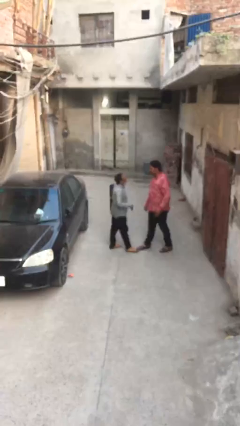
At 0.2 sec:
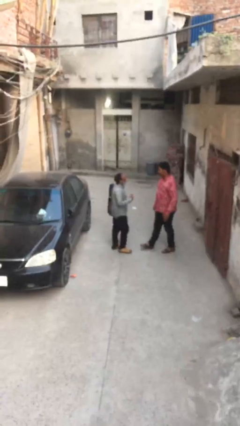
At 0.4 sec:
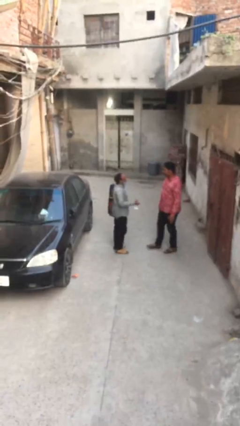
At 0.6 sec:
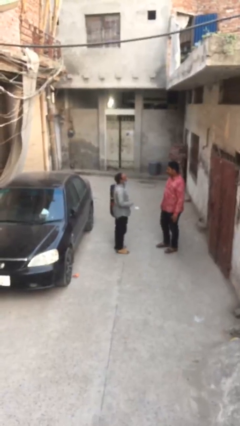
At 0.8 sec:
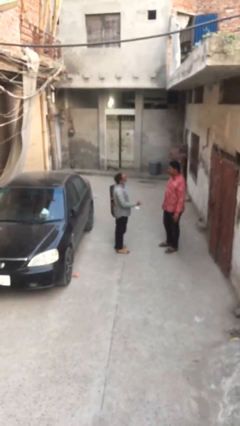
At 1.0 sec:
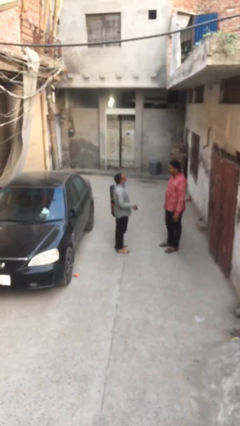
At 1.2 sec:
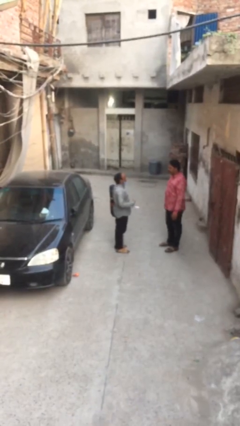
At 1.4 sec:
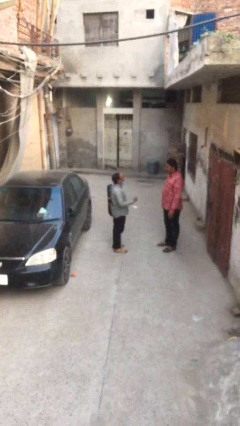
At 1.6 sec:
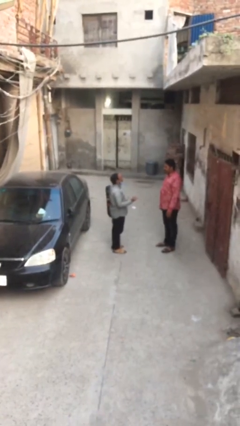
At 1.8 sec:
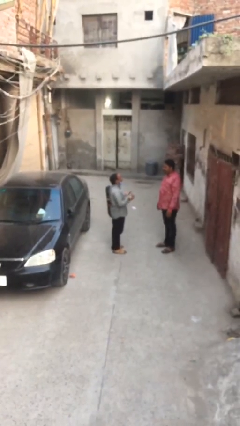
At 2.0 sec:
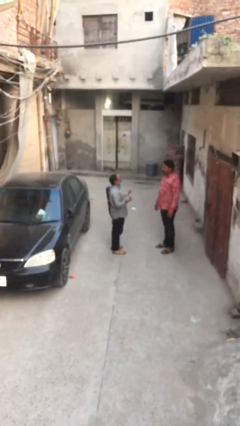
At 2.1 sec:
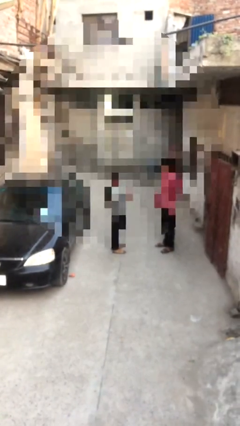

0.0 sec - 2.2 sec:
person talks to person

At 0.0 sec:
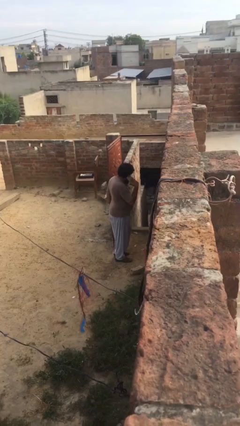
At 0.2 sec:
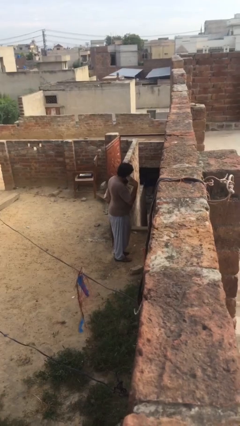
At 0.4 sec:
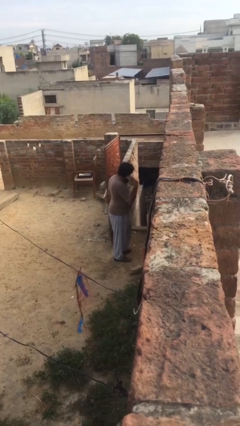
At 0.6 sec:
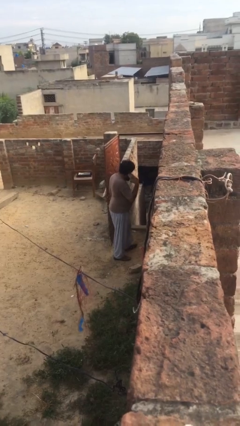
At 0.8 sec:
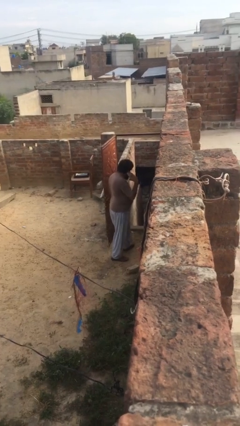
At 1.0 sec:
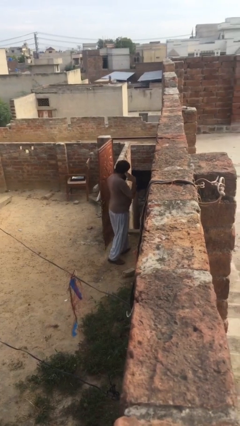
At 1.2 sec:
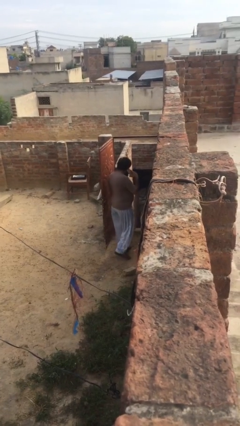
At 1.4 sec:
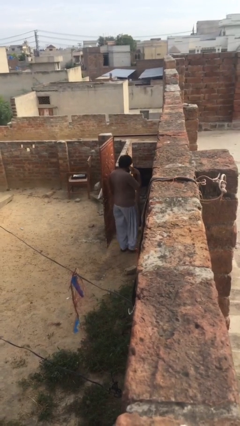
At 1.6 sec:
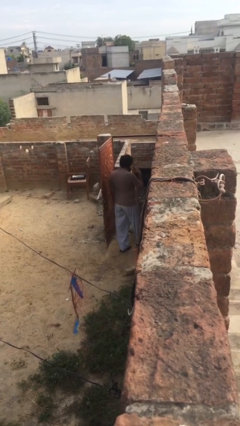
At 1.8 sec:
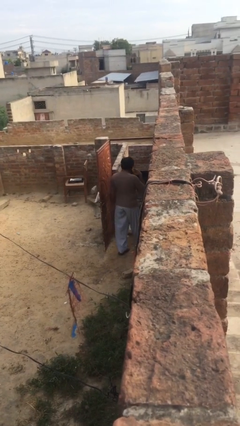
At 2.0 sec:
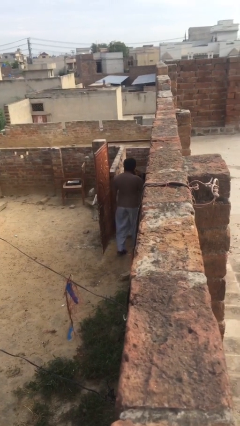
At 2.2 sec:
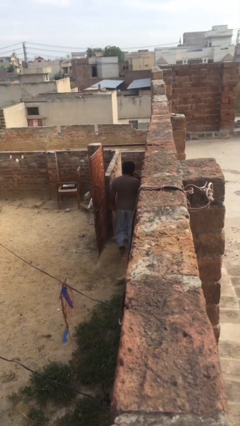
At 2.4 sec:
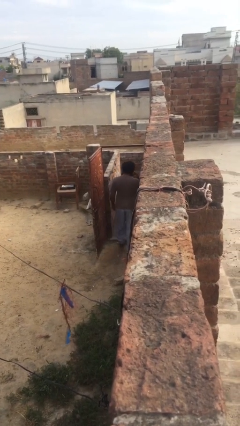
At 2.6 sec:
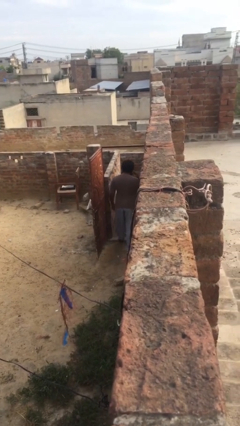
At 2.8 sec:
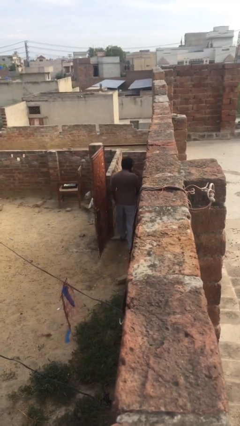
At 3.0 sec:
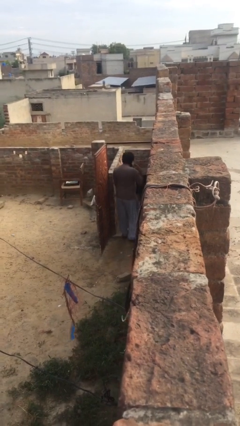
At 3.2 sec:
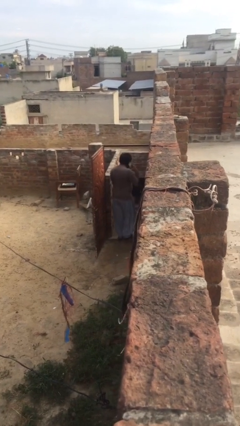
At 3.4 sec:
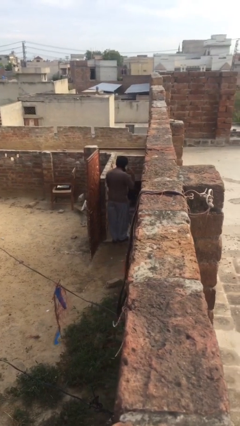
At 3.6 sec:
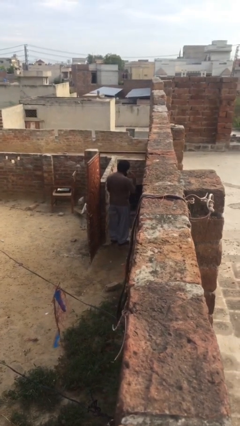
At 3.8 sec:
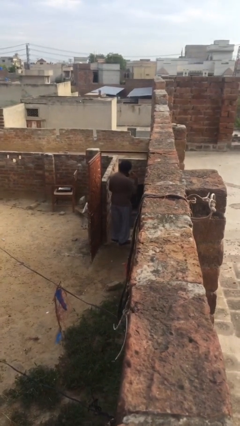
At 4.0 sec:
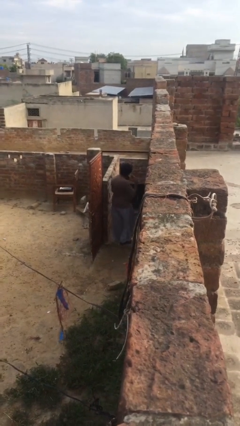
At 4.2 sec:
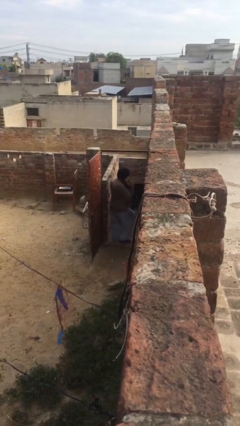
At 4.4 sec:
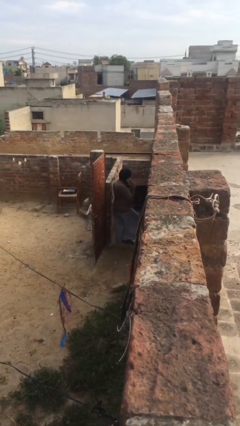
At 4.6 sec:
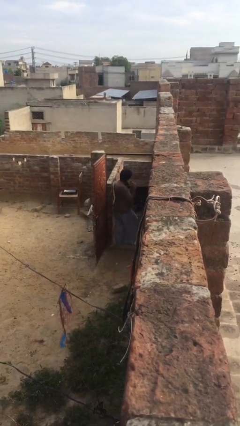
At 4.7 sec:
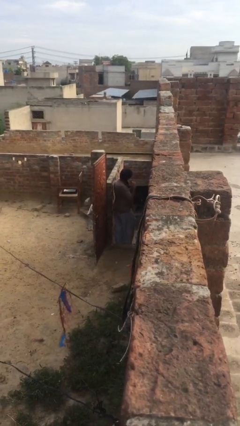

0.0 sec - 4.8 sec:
person exits scene through structure

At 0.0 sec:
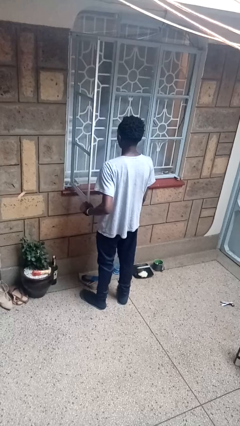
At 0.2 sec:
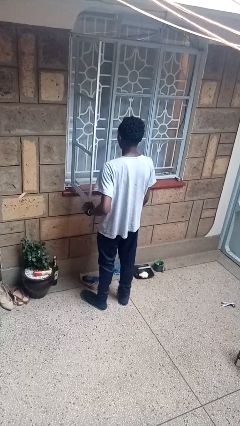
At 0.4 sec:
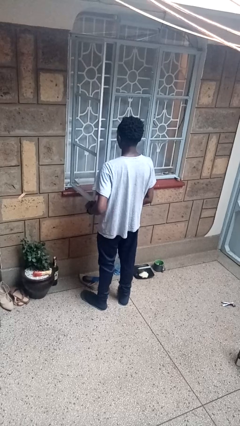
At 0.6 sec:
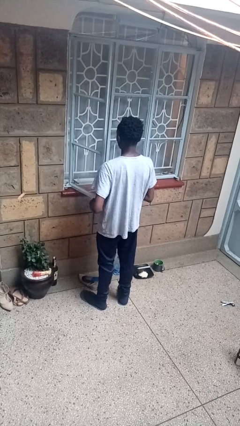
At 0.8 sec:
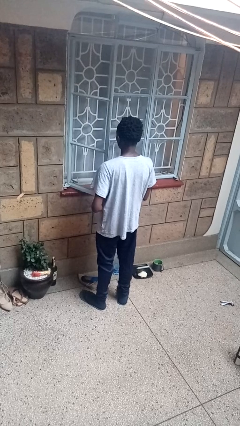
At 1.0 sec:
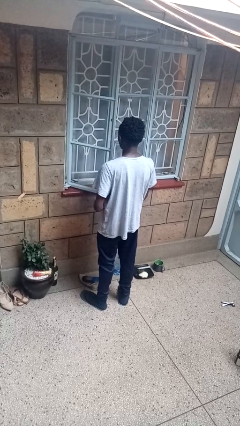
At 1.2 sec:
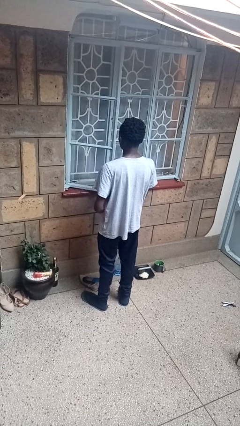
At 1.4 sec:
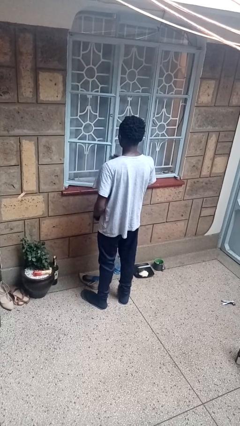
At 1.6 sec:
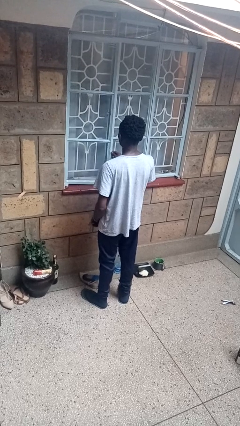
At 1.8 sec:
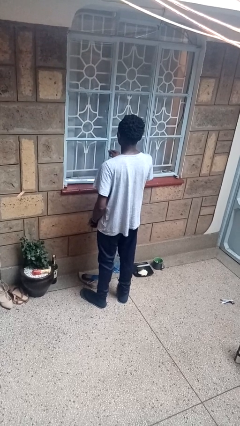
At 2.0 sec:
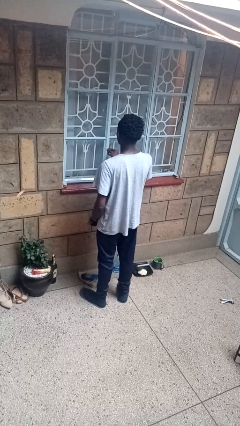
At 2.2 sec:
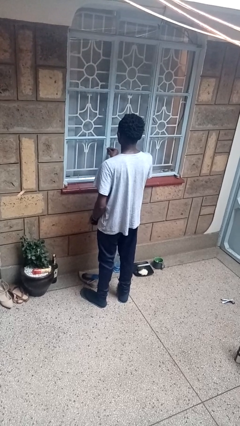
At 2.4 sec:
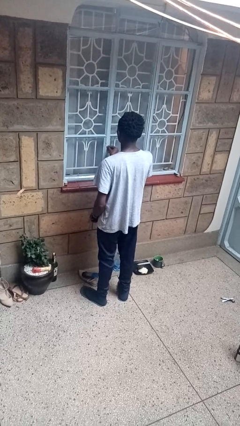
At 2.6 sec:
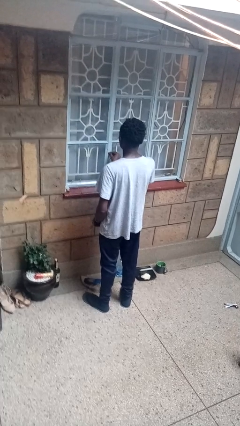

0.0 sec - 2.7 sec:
person closes home window

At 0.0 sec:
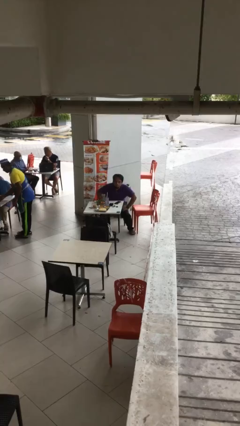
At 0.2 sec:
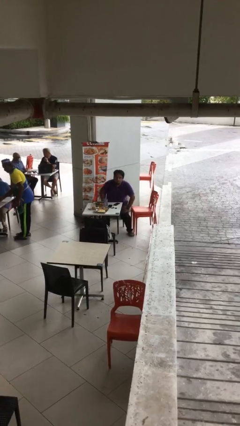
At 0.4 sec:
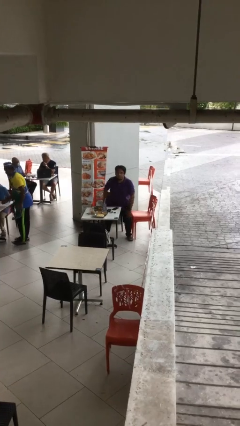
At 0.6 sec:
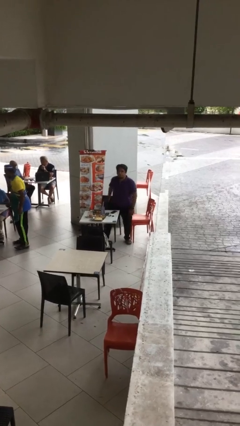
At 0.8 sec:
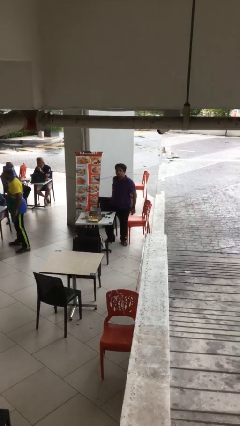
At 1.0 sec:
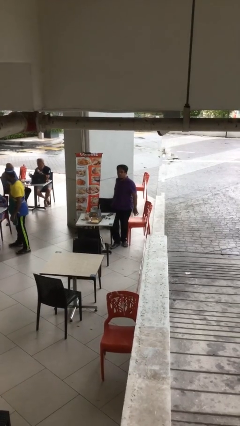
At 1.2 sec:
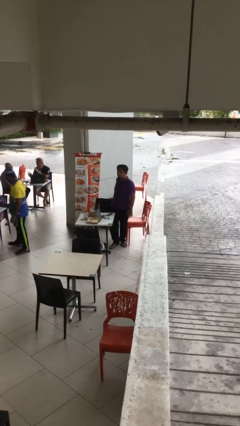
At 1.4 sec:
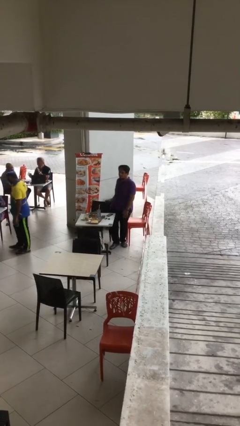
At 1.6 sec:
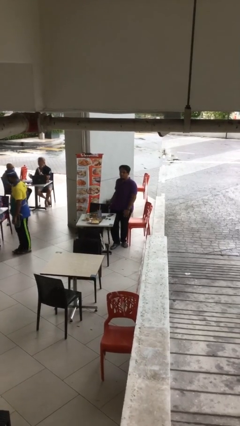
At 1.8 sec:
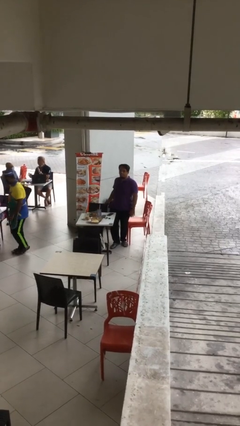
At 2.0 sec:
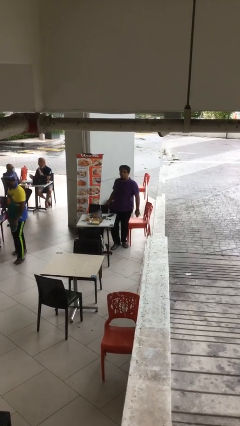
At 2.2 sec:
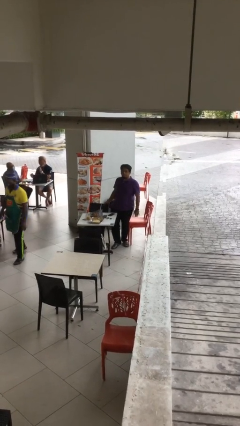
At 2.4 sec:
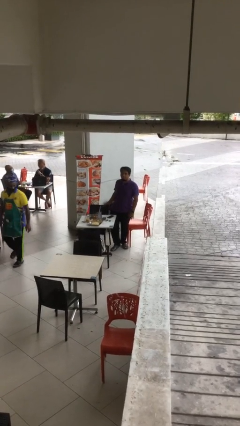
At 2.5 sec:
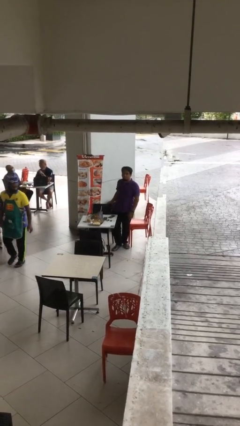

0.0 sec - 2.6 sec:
person stands up

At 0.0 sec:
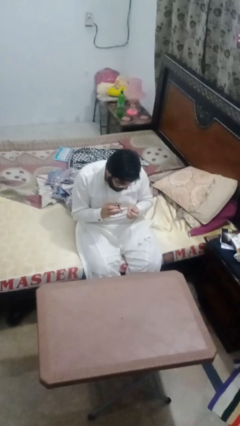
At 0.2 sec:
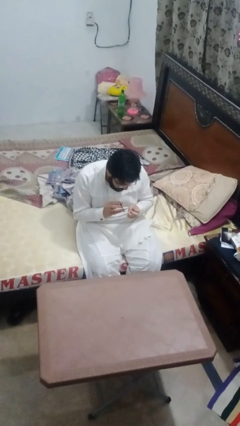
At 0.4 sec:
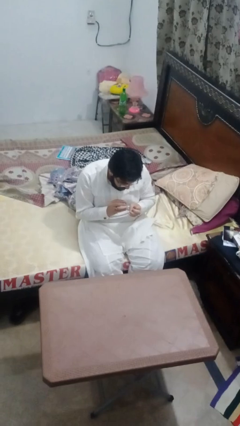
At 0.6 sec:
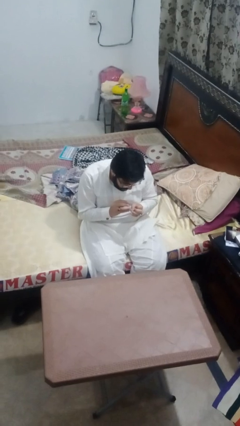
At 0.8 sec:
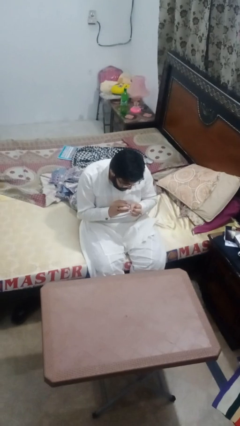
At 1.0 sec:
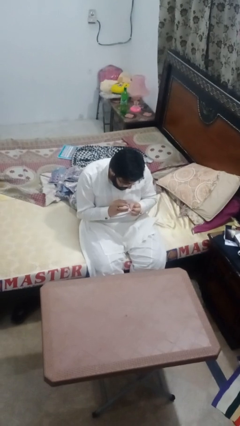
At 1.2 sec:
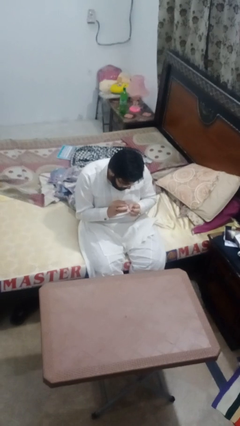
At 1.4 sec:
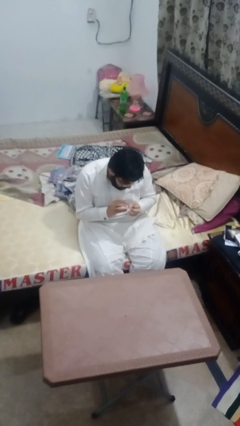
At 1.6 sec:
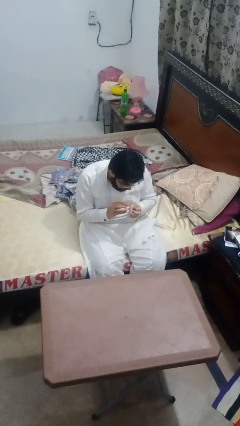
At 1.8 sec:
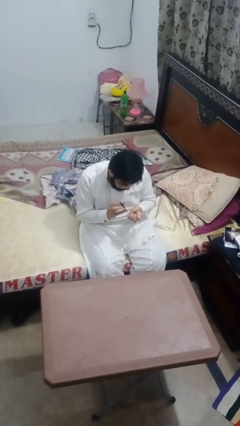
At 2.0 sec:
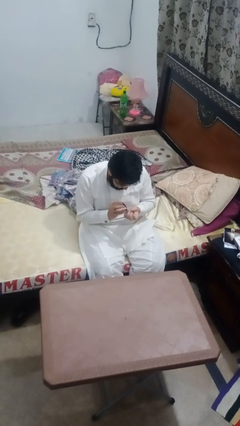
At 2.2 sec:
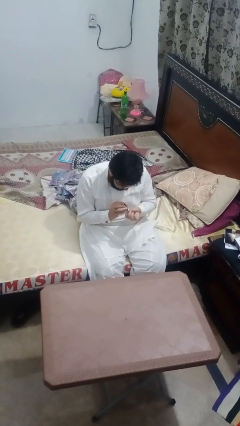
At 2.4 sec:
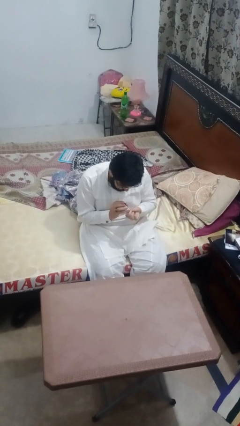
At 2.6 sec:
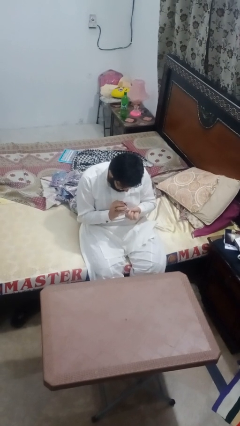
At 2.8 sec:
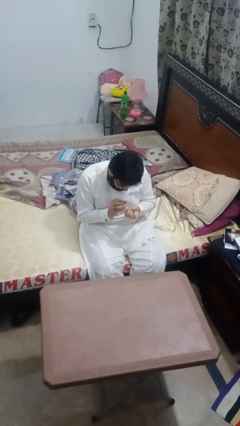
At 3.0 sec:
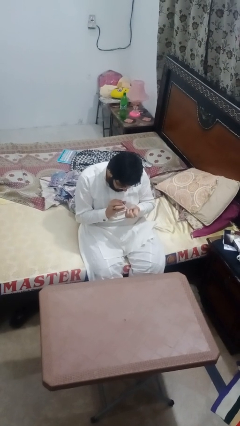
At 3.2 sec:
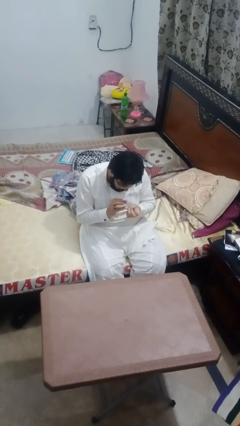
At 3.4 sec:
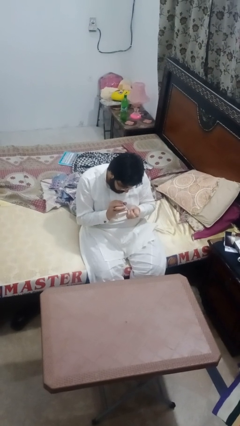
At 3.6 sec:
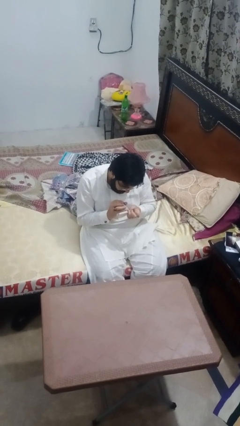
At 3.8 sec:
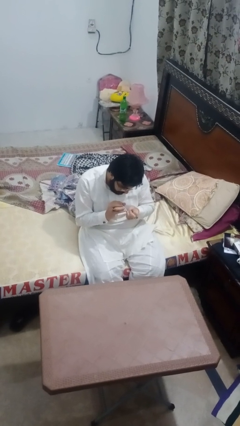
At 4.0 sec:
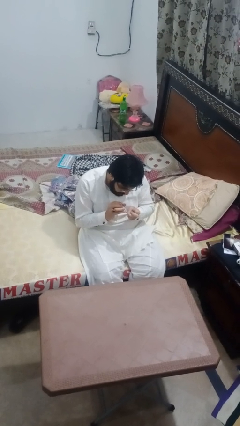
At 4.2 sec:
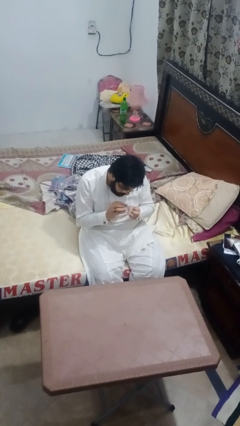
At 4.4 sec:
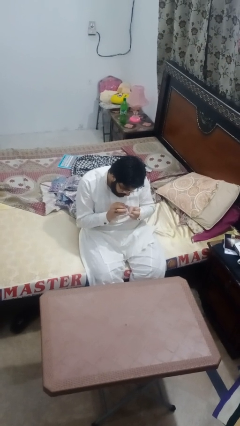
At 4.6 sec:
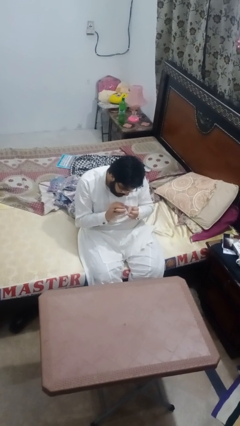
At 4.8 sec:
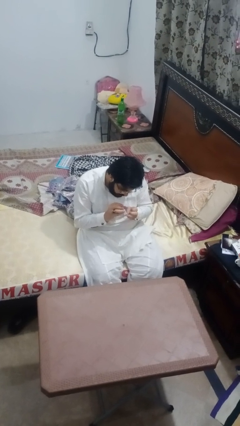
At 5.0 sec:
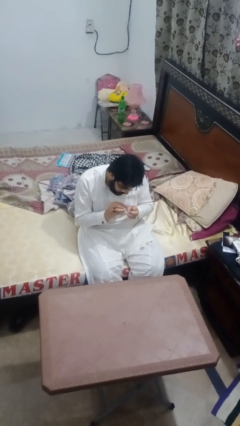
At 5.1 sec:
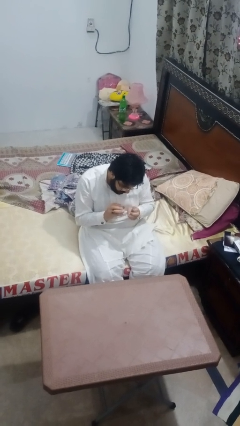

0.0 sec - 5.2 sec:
person clips fingernails

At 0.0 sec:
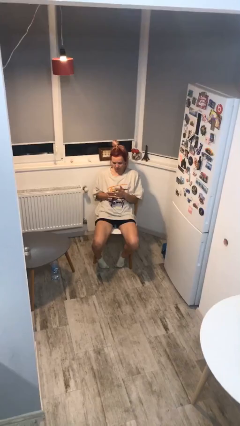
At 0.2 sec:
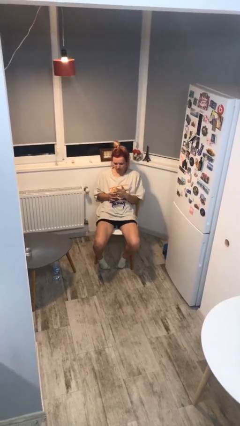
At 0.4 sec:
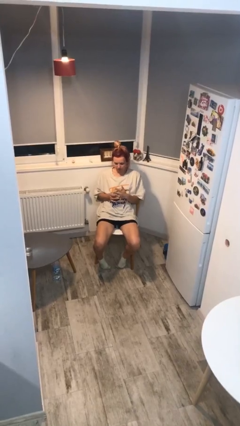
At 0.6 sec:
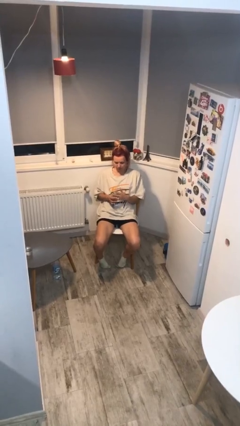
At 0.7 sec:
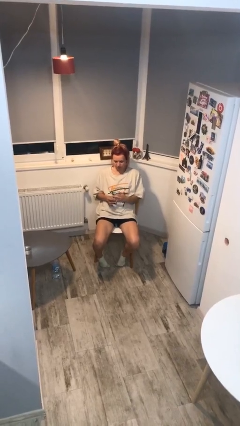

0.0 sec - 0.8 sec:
person puts on ring
